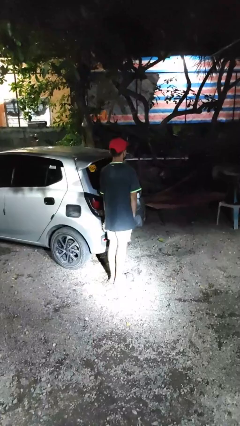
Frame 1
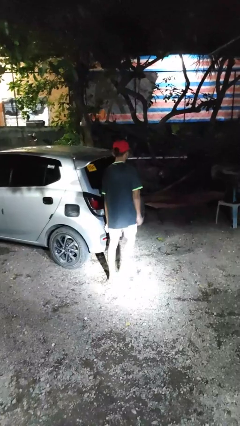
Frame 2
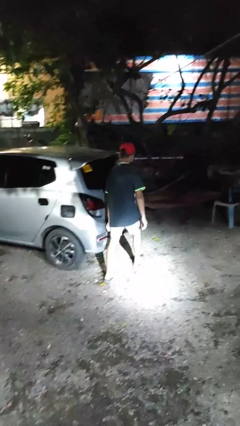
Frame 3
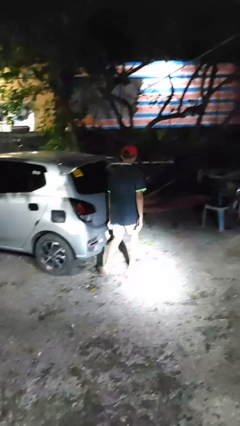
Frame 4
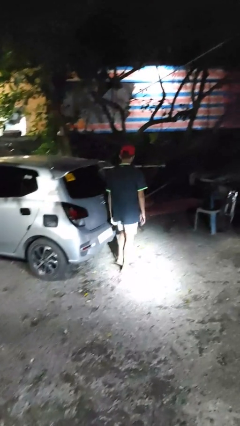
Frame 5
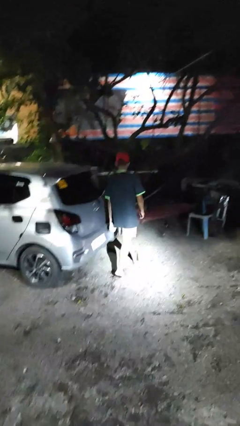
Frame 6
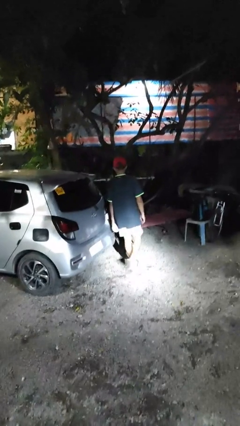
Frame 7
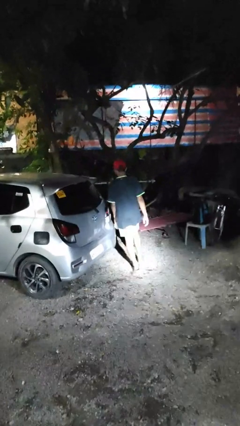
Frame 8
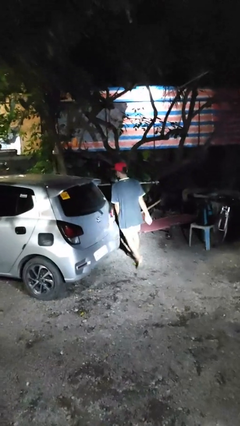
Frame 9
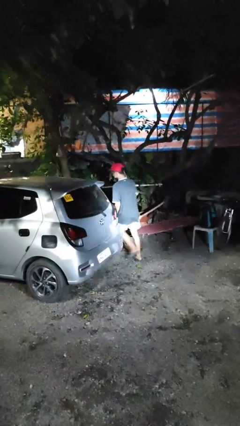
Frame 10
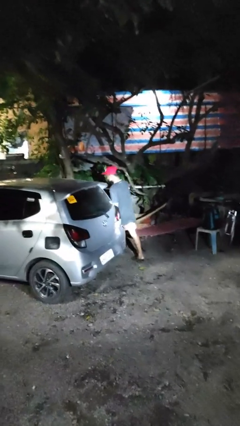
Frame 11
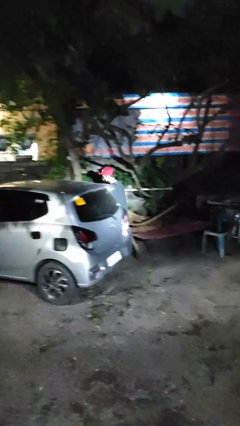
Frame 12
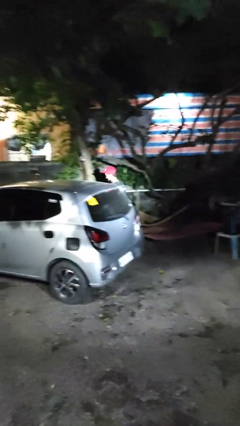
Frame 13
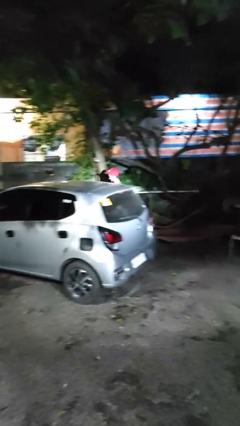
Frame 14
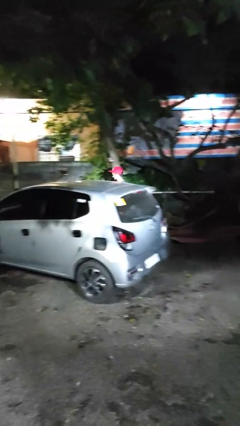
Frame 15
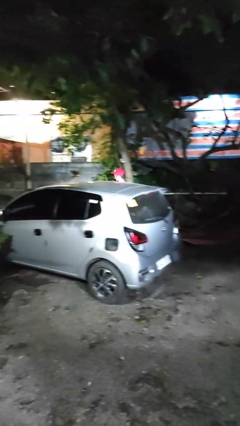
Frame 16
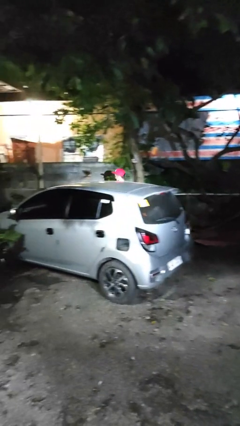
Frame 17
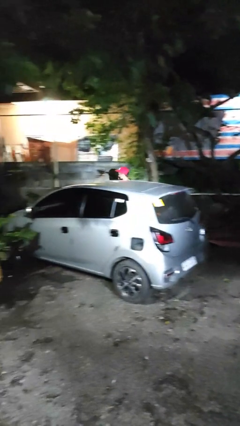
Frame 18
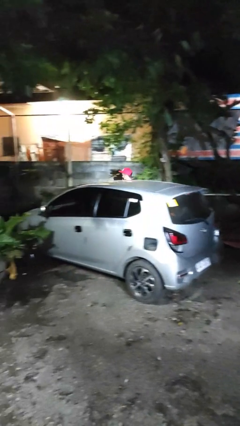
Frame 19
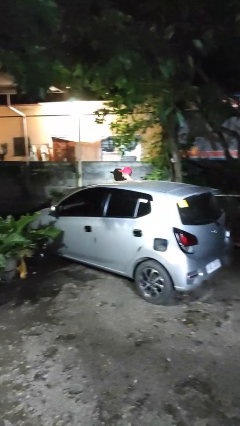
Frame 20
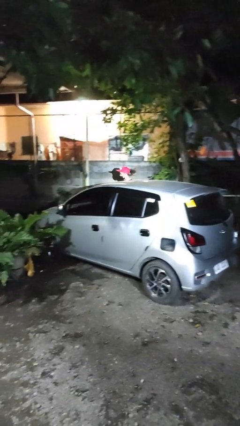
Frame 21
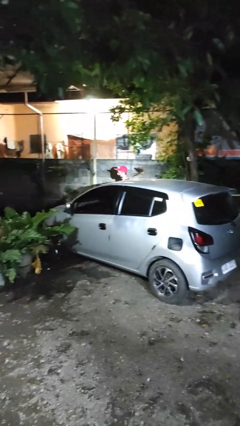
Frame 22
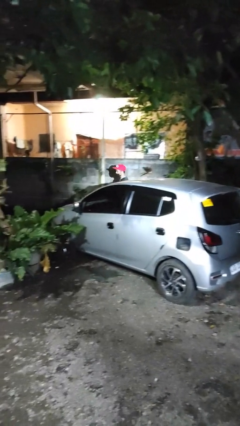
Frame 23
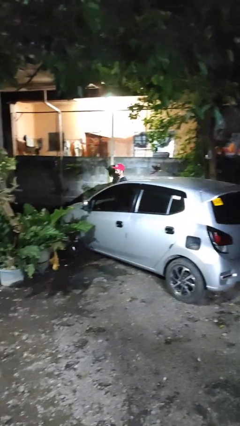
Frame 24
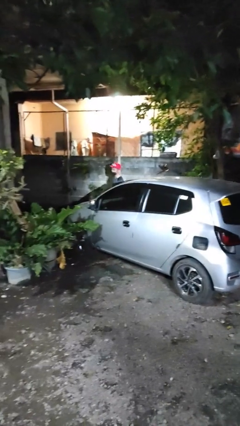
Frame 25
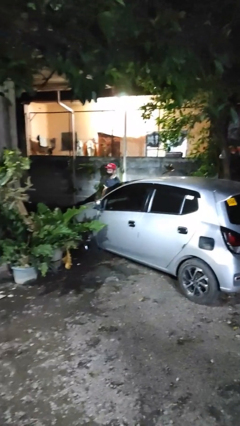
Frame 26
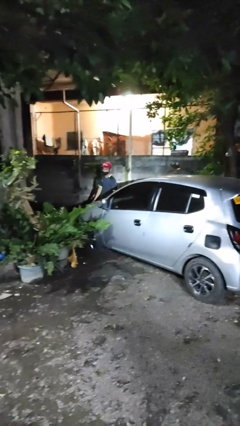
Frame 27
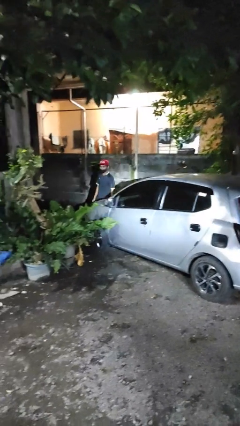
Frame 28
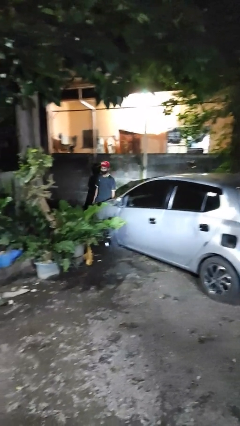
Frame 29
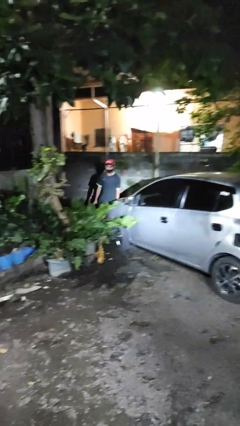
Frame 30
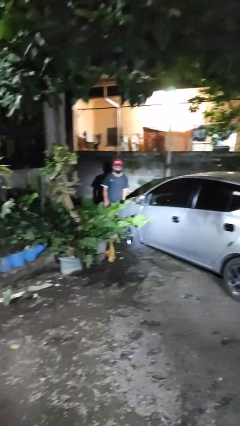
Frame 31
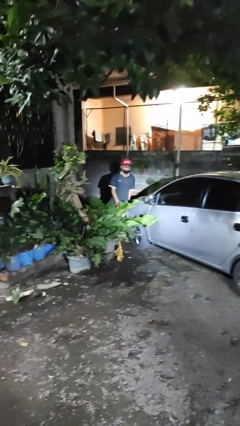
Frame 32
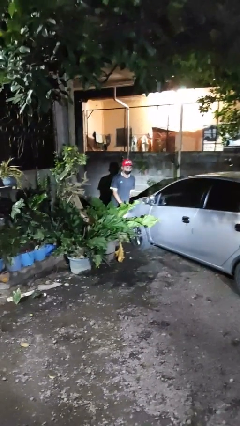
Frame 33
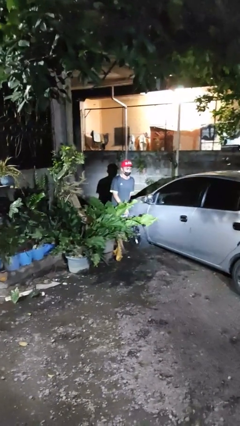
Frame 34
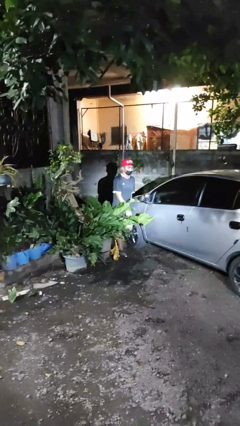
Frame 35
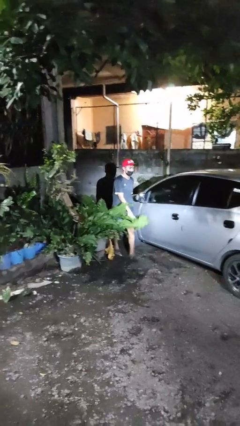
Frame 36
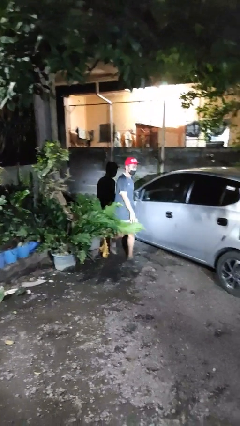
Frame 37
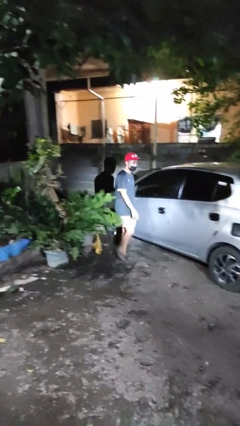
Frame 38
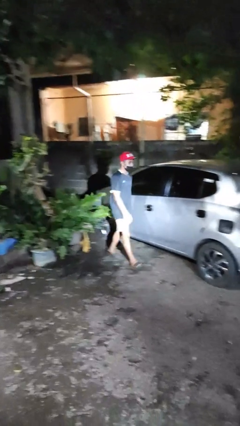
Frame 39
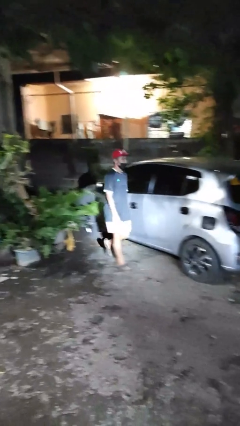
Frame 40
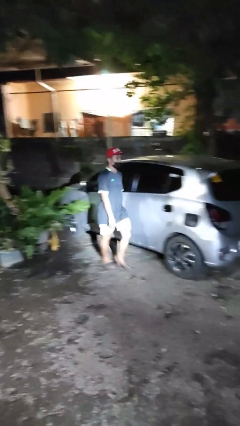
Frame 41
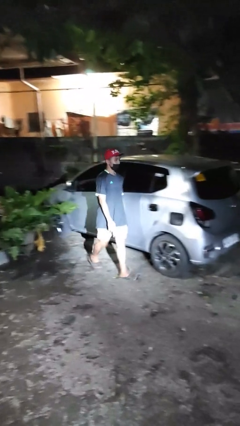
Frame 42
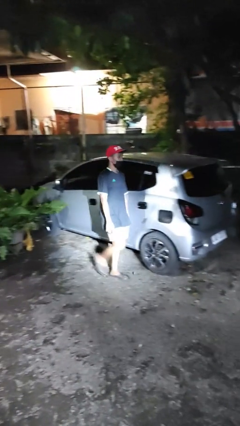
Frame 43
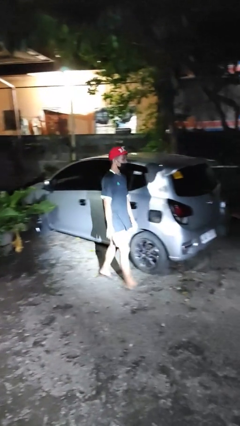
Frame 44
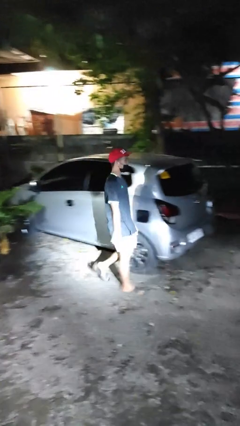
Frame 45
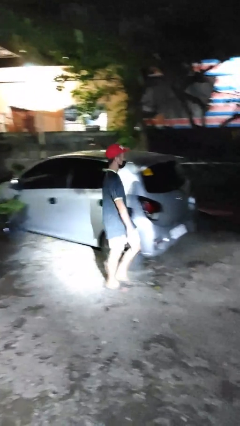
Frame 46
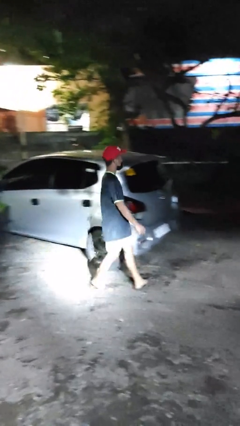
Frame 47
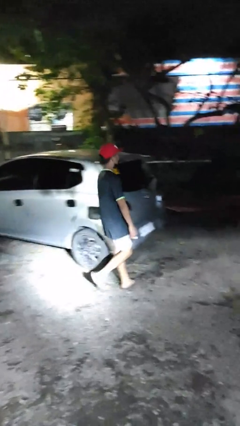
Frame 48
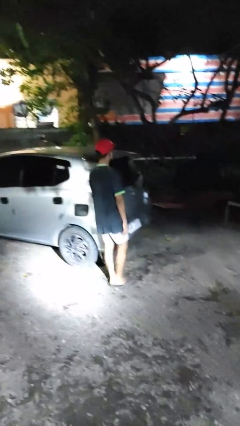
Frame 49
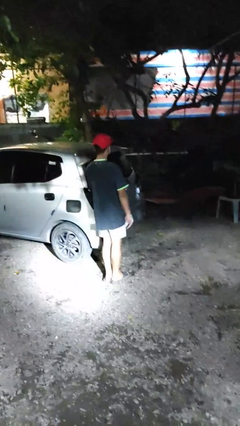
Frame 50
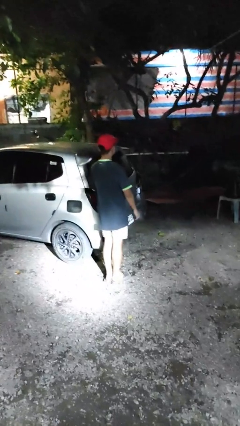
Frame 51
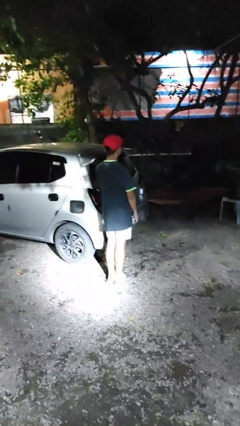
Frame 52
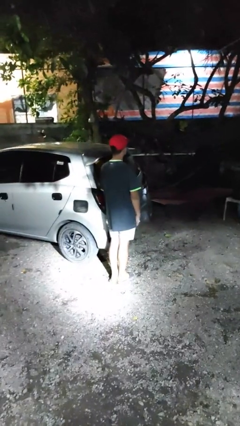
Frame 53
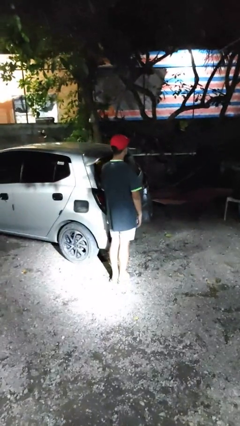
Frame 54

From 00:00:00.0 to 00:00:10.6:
person walks around car

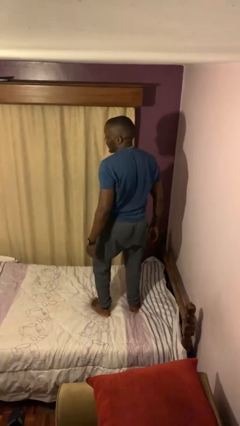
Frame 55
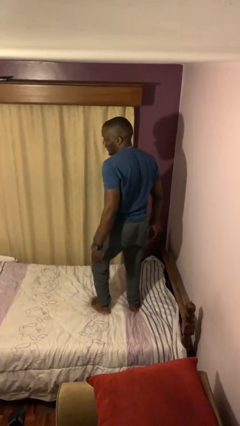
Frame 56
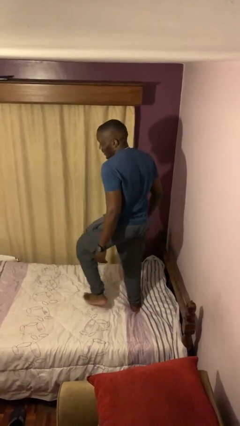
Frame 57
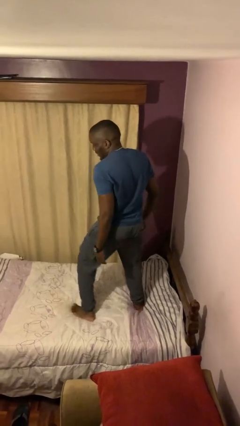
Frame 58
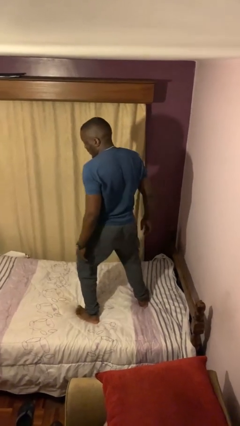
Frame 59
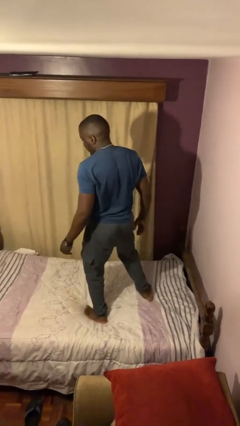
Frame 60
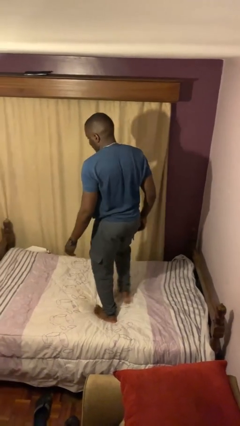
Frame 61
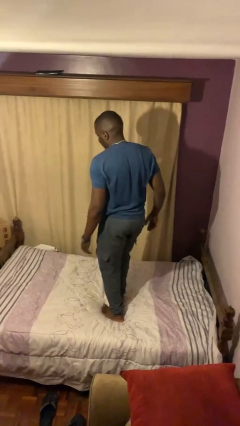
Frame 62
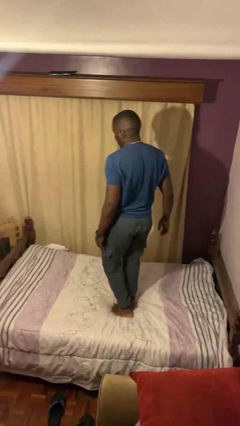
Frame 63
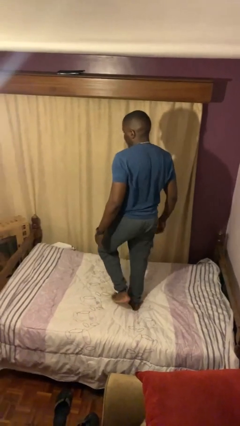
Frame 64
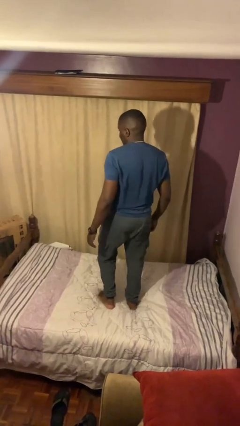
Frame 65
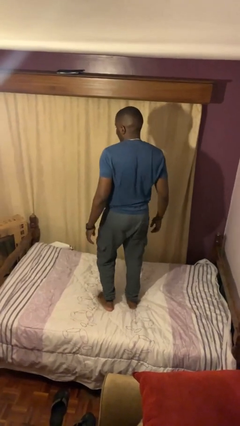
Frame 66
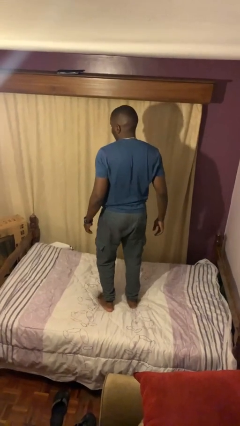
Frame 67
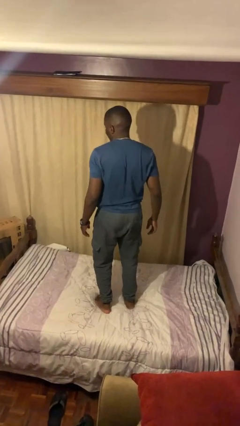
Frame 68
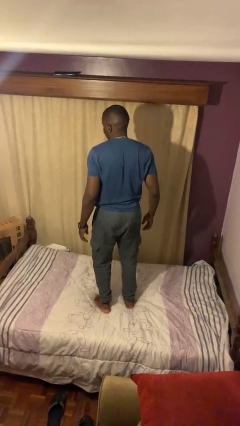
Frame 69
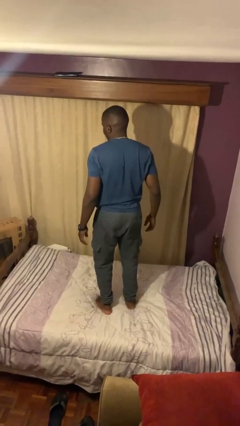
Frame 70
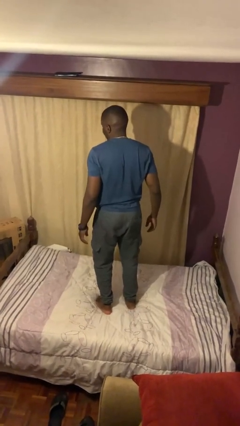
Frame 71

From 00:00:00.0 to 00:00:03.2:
person jumps on bed

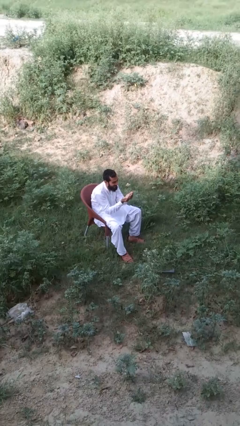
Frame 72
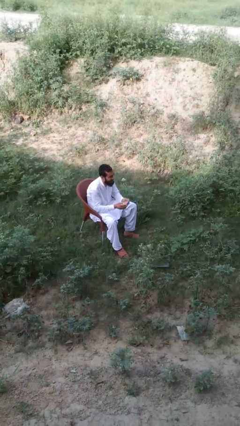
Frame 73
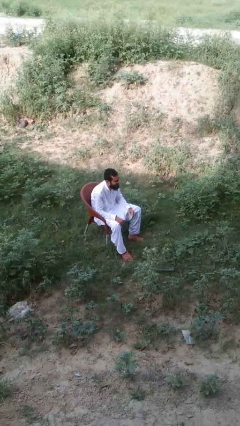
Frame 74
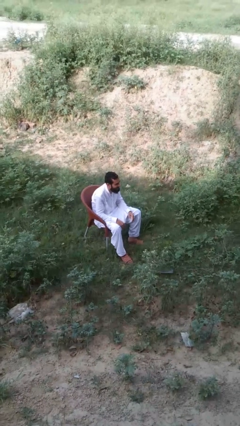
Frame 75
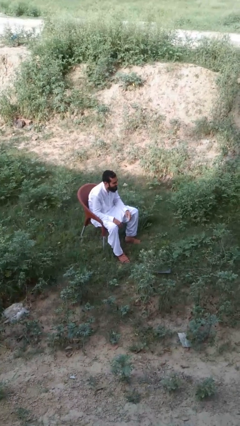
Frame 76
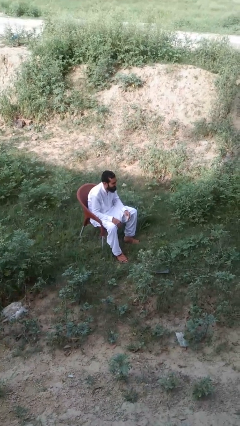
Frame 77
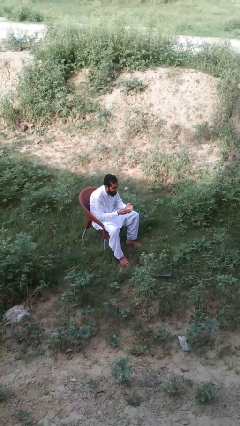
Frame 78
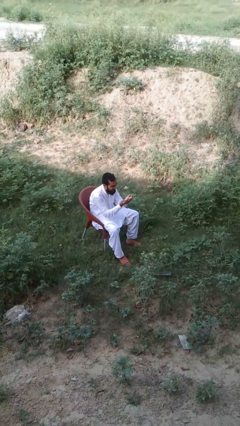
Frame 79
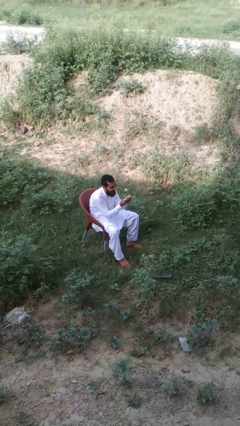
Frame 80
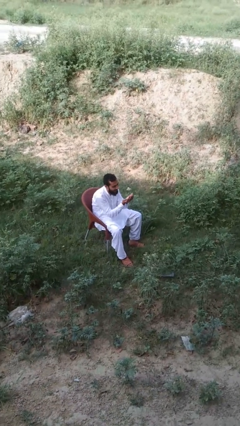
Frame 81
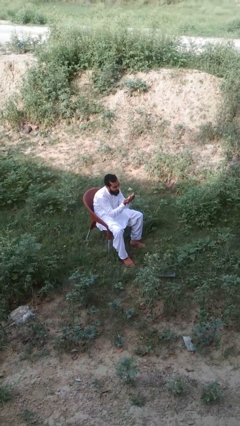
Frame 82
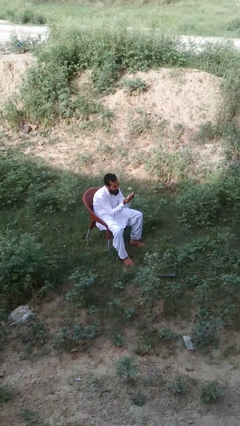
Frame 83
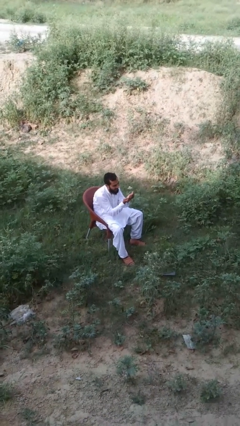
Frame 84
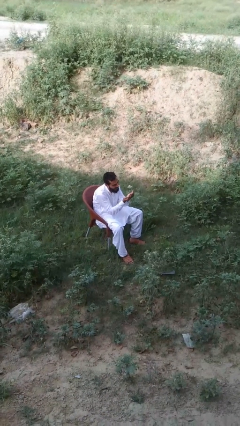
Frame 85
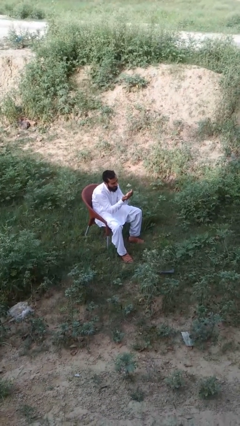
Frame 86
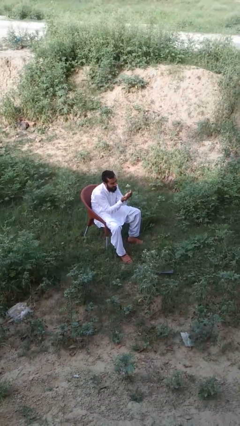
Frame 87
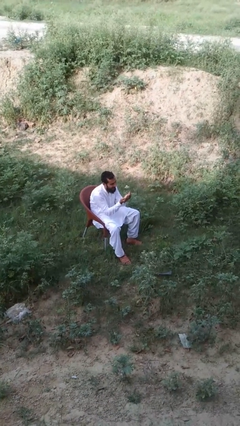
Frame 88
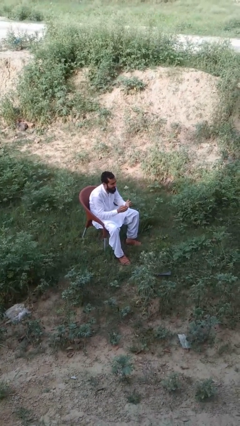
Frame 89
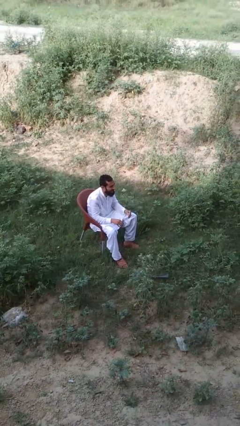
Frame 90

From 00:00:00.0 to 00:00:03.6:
person prays

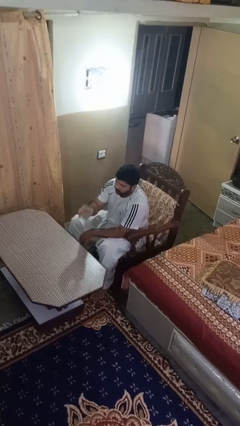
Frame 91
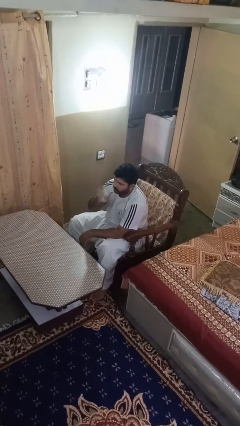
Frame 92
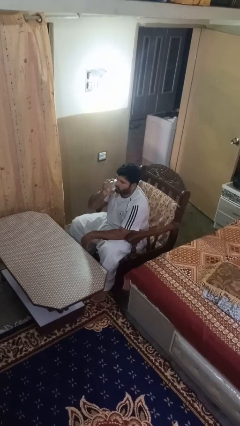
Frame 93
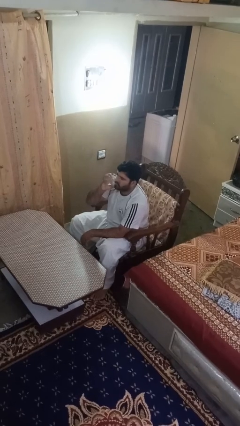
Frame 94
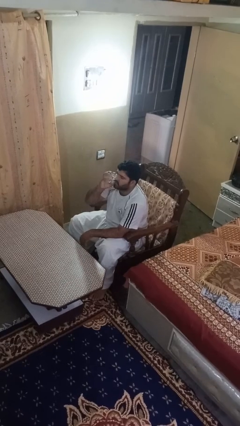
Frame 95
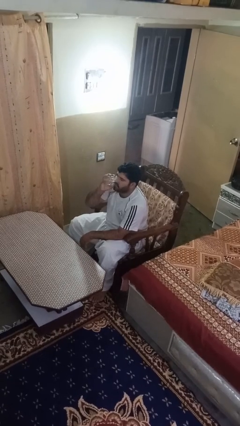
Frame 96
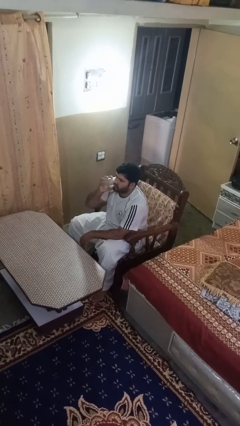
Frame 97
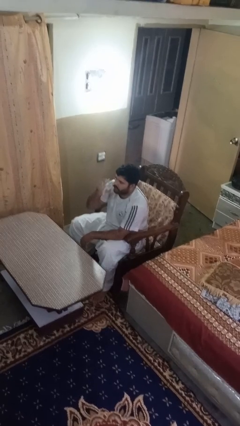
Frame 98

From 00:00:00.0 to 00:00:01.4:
person drinks from shotglass
